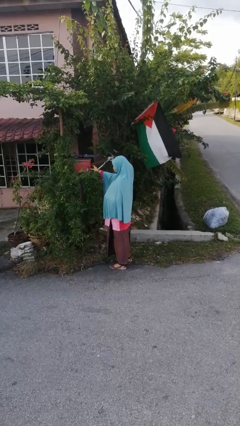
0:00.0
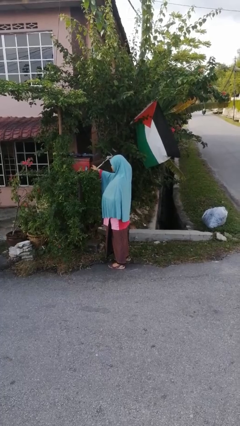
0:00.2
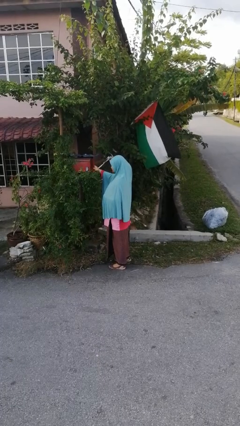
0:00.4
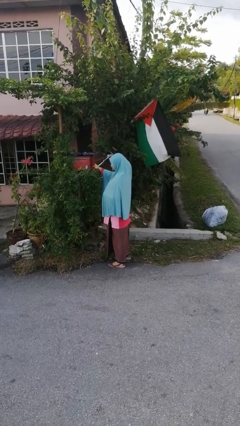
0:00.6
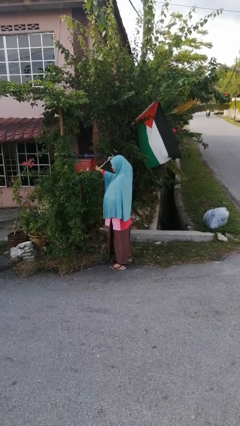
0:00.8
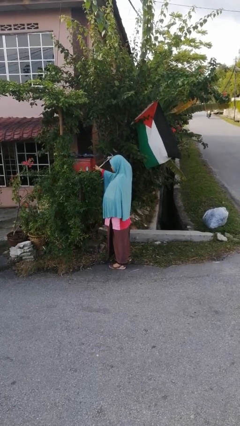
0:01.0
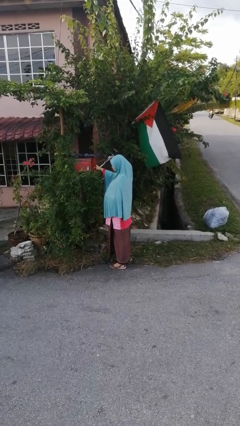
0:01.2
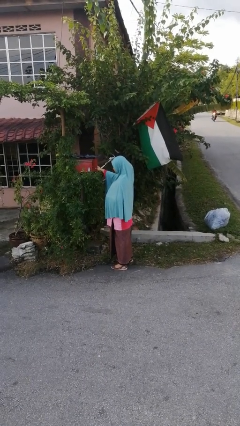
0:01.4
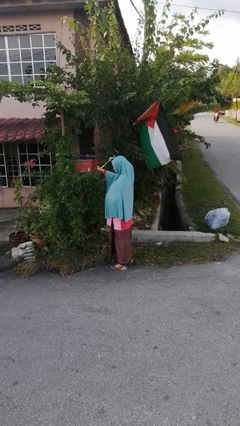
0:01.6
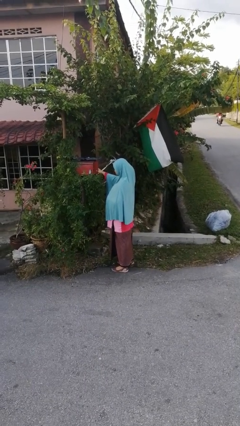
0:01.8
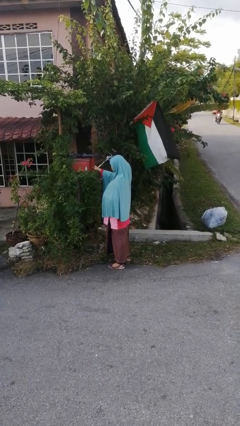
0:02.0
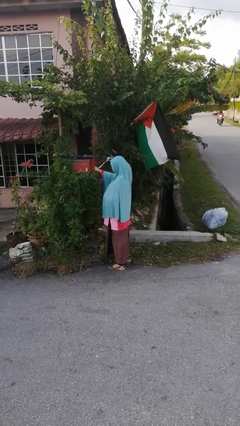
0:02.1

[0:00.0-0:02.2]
person opens mailbox

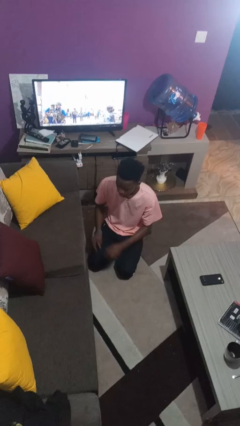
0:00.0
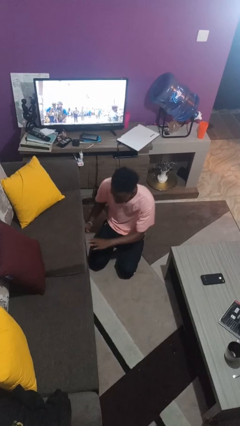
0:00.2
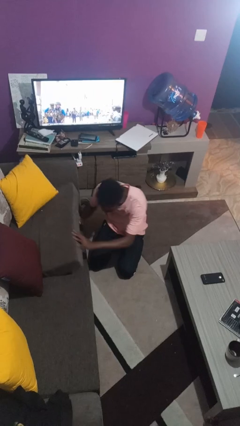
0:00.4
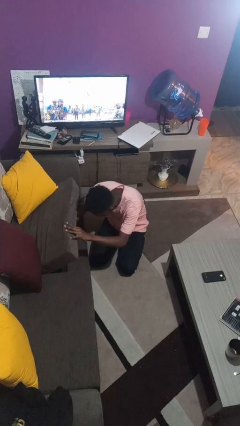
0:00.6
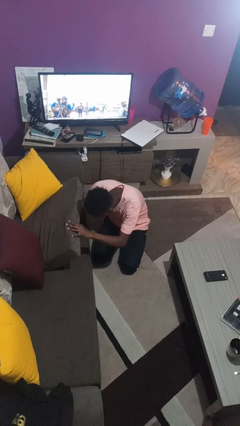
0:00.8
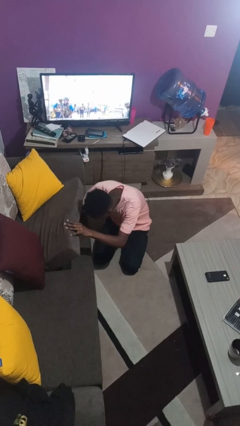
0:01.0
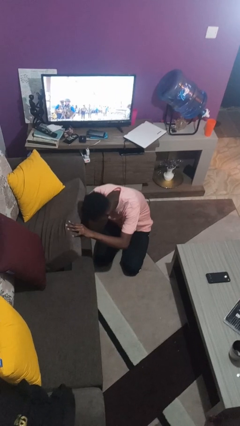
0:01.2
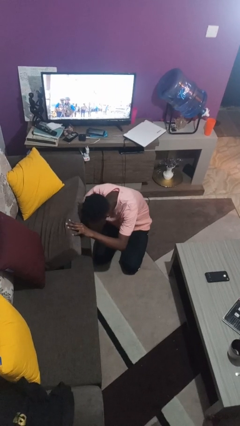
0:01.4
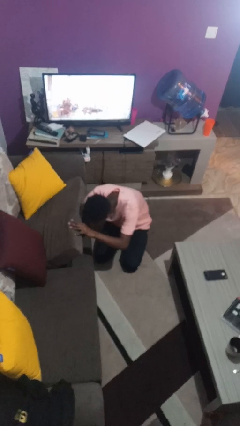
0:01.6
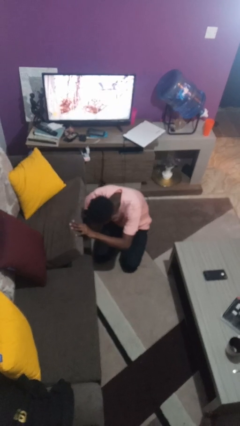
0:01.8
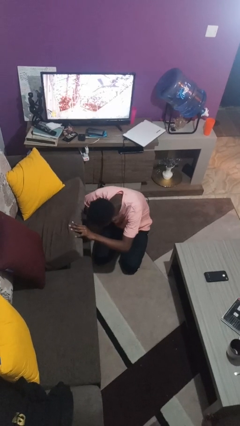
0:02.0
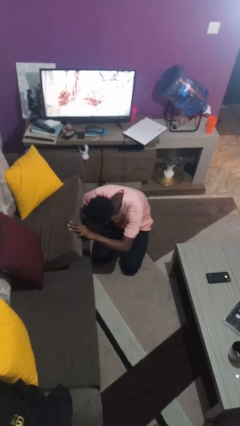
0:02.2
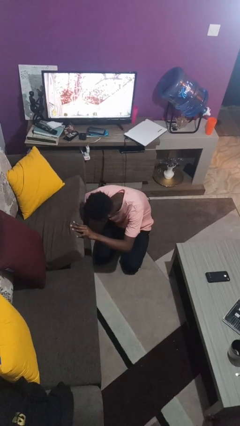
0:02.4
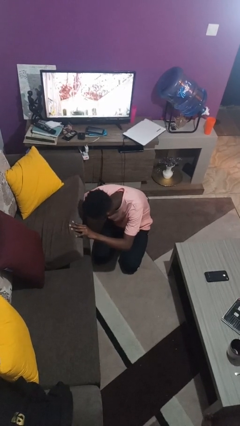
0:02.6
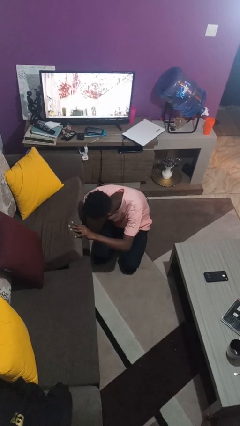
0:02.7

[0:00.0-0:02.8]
person searches under couch

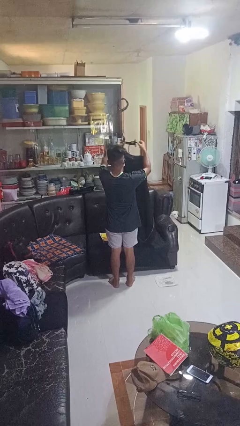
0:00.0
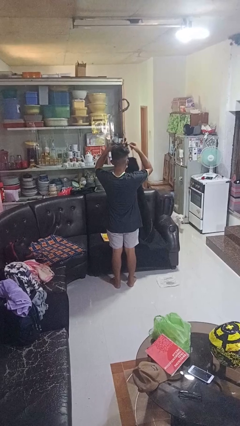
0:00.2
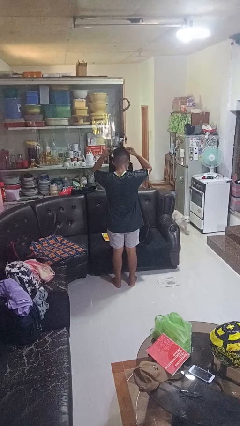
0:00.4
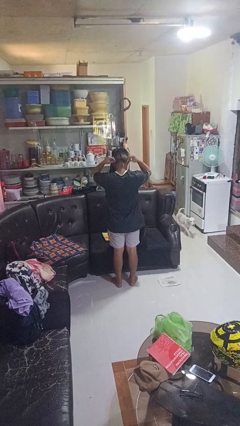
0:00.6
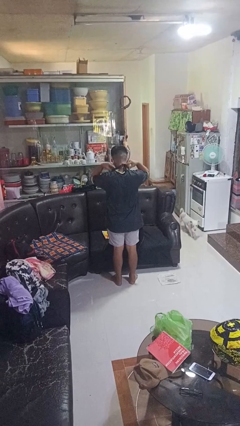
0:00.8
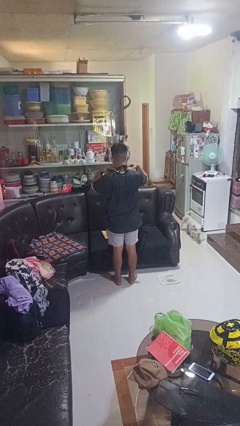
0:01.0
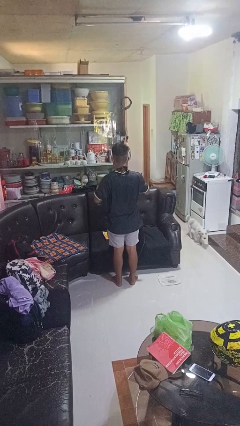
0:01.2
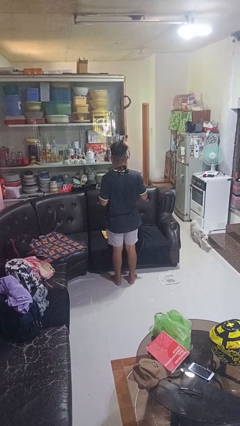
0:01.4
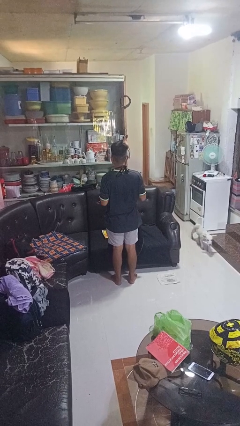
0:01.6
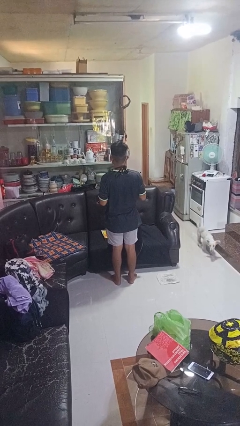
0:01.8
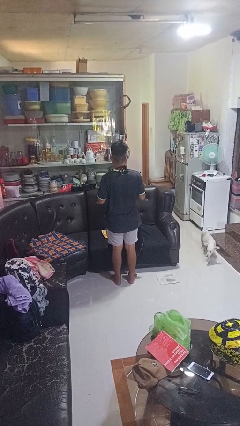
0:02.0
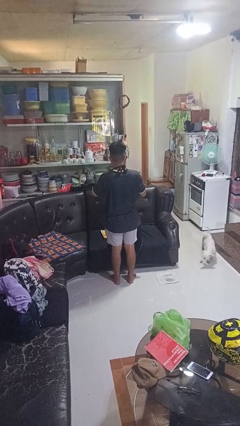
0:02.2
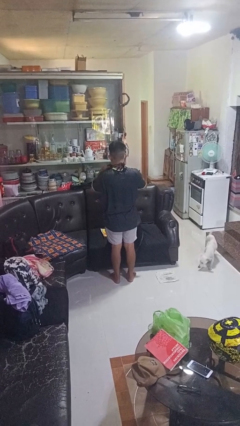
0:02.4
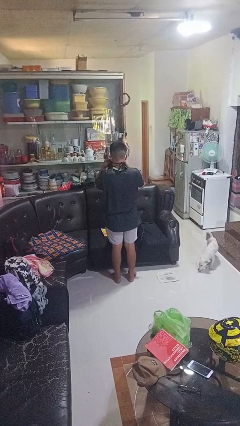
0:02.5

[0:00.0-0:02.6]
person puts on apron

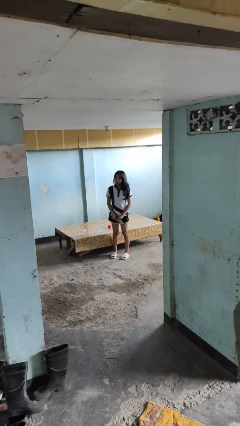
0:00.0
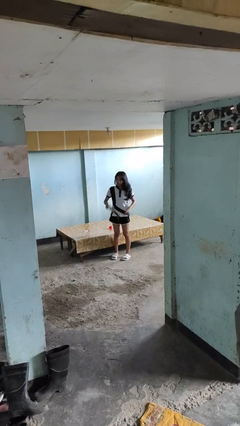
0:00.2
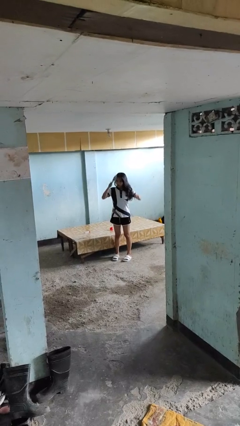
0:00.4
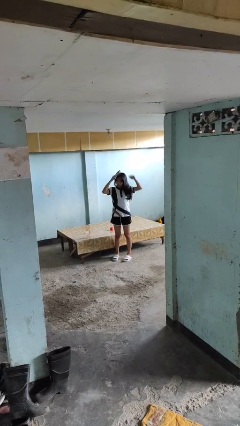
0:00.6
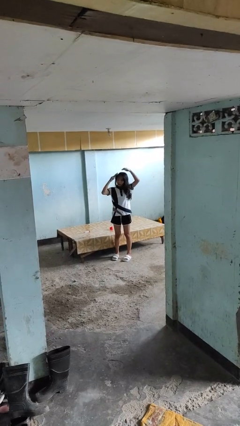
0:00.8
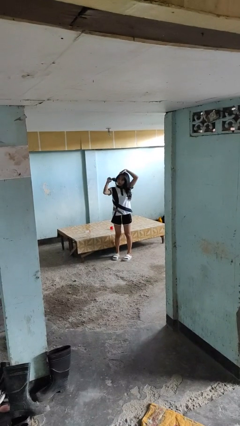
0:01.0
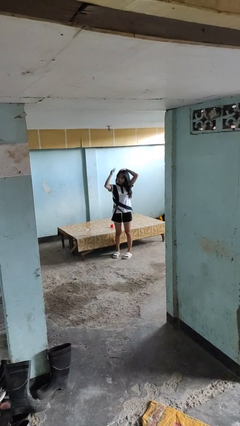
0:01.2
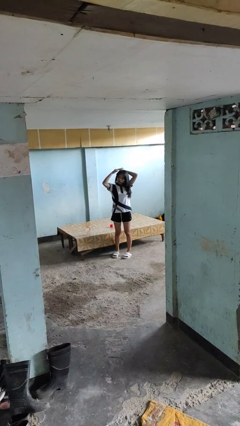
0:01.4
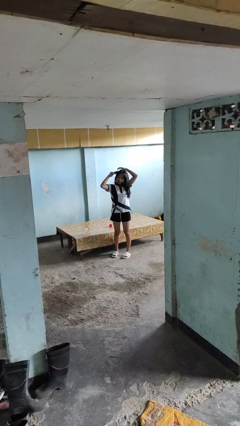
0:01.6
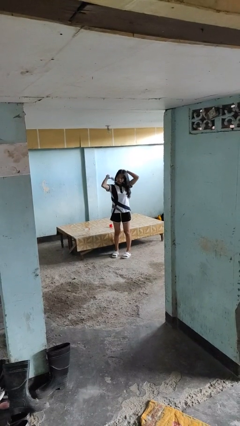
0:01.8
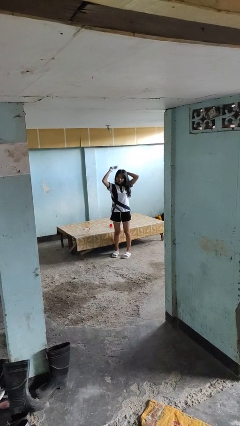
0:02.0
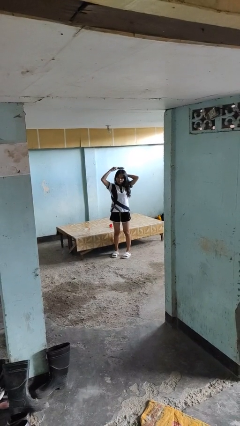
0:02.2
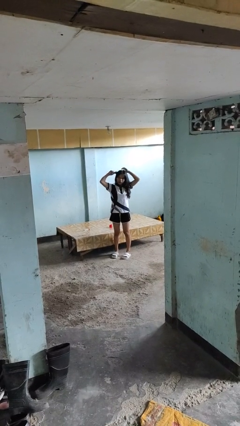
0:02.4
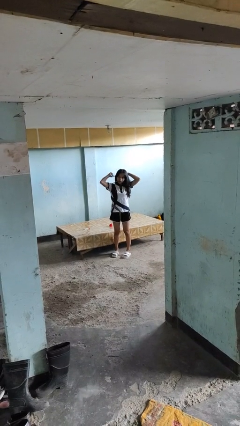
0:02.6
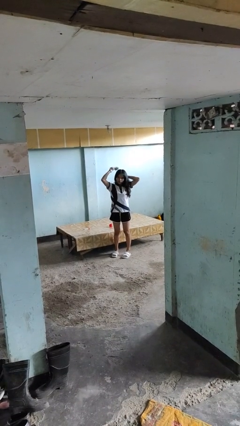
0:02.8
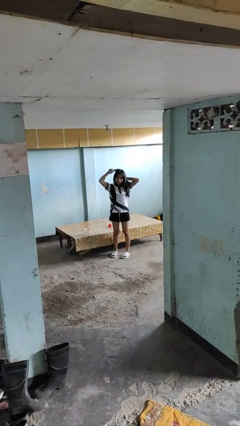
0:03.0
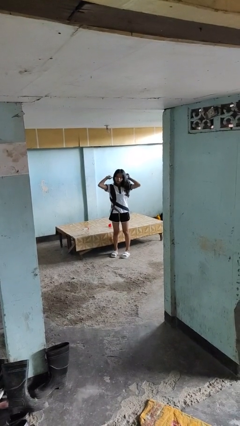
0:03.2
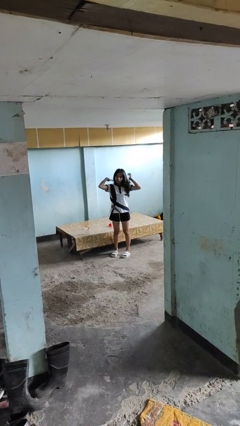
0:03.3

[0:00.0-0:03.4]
person brushes hair

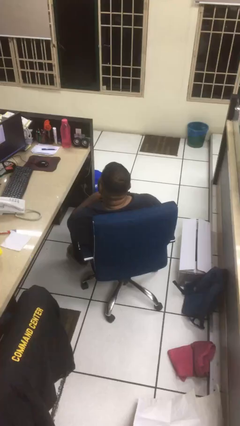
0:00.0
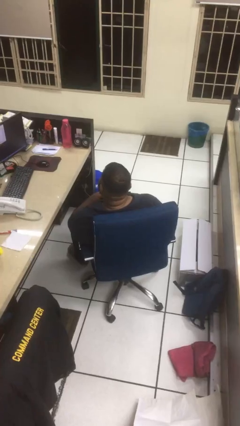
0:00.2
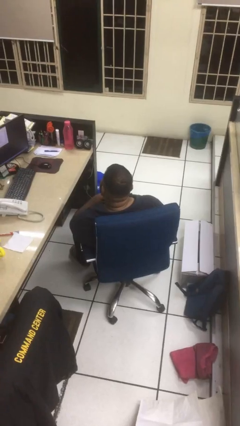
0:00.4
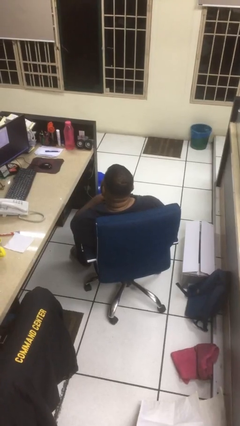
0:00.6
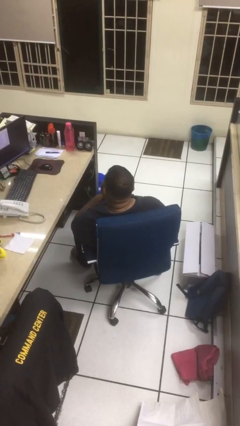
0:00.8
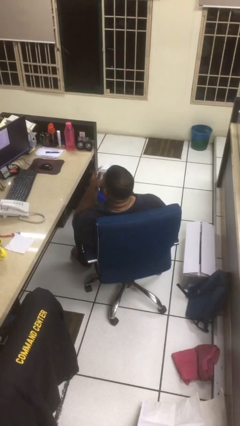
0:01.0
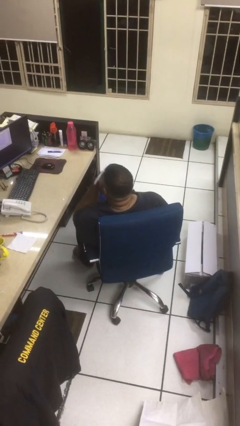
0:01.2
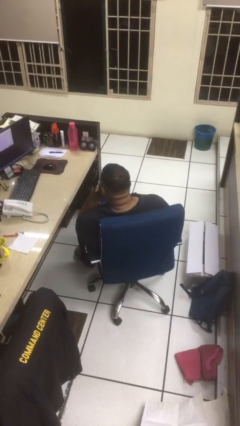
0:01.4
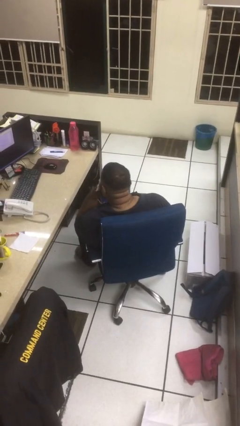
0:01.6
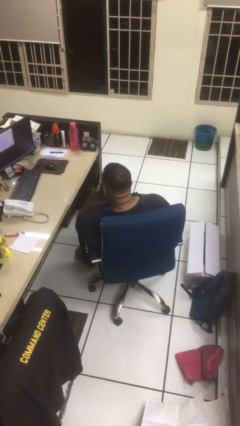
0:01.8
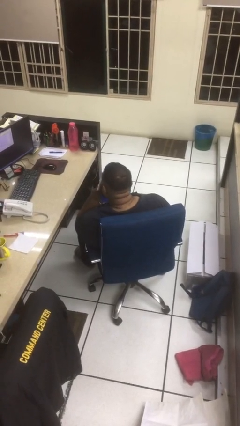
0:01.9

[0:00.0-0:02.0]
person blows nose

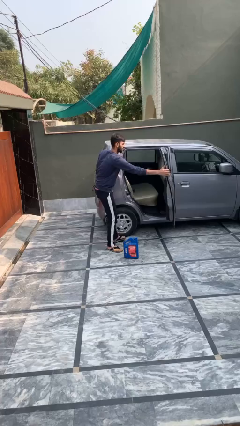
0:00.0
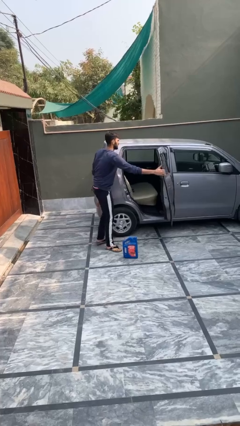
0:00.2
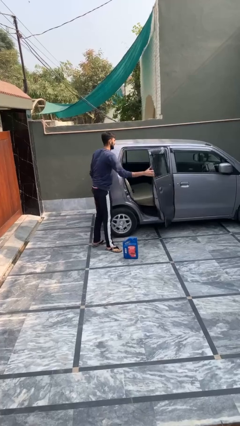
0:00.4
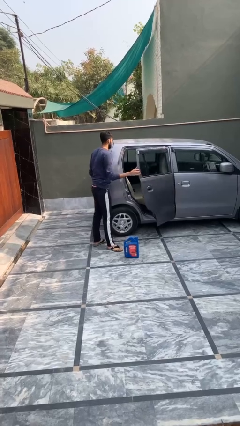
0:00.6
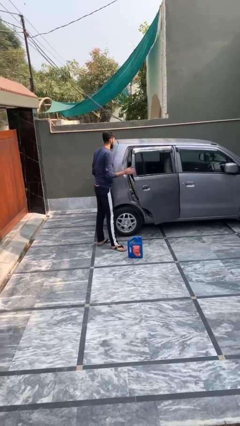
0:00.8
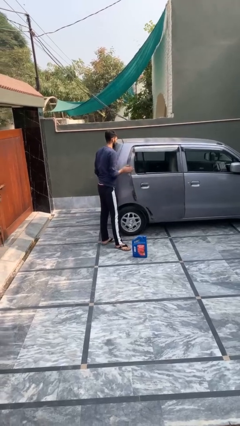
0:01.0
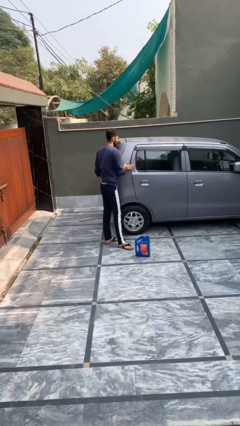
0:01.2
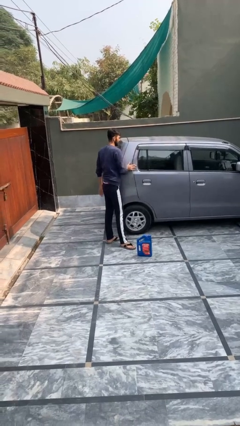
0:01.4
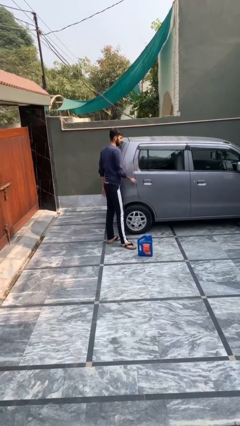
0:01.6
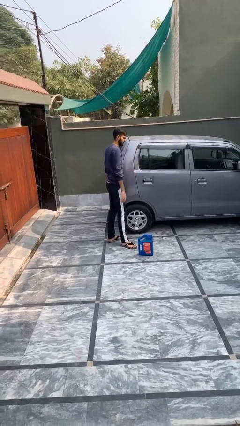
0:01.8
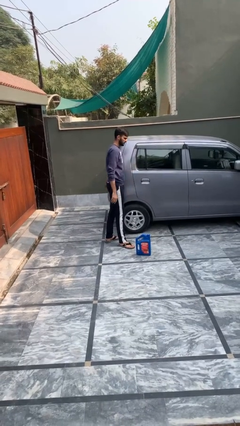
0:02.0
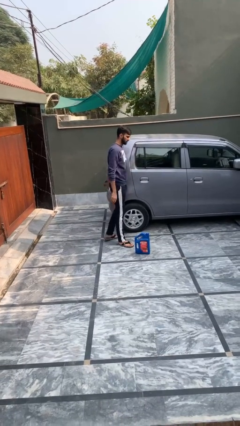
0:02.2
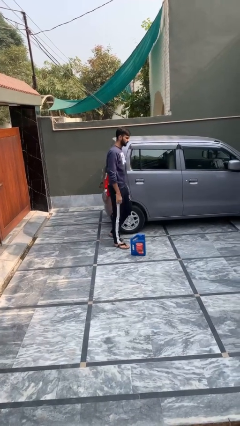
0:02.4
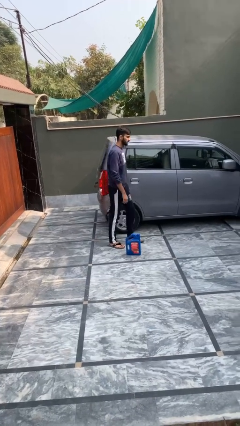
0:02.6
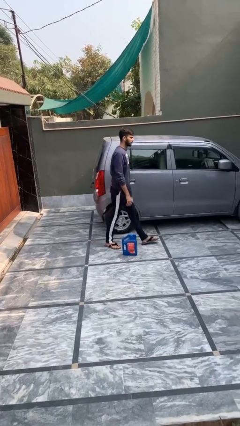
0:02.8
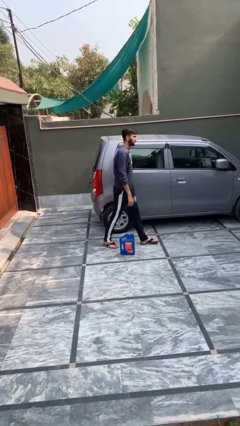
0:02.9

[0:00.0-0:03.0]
person closes car door

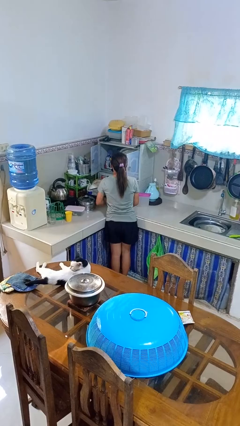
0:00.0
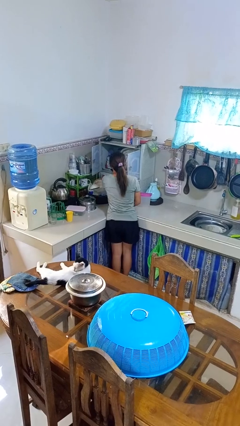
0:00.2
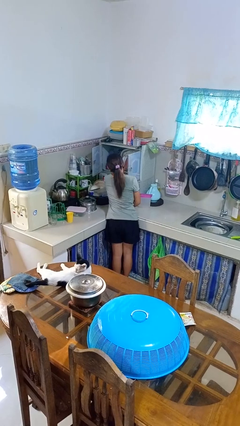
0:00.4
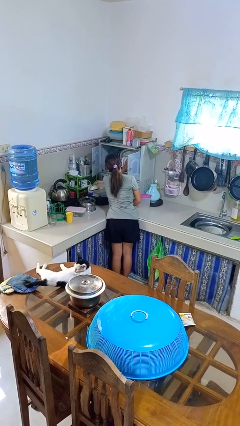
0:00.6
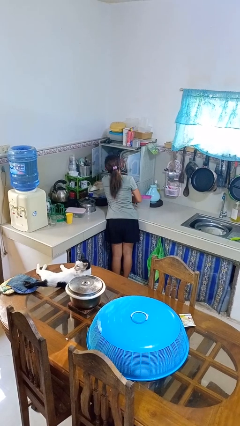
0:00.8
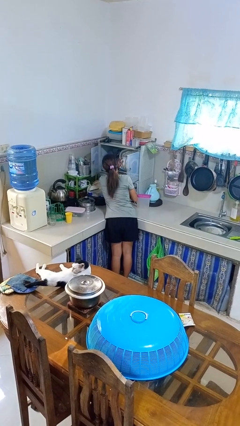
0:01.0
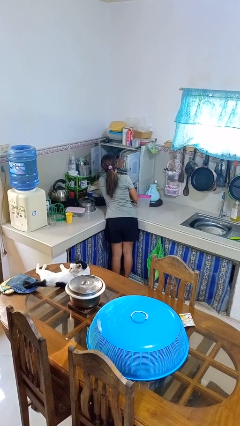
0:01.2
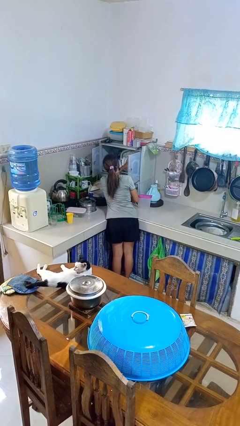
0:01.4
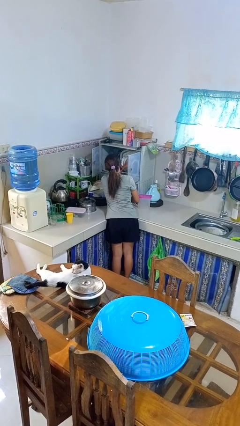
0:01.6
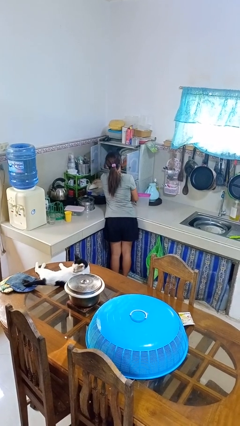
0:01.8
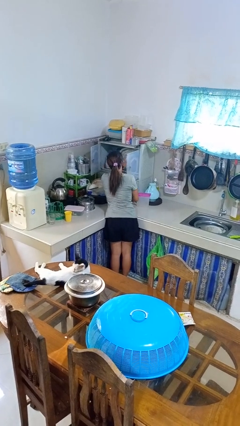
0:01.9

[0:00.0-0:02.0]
person searches in kitchen drawer
